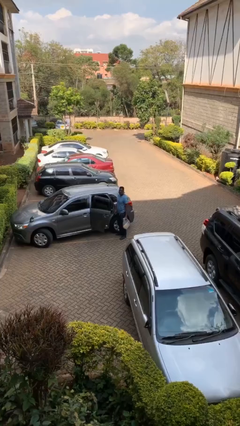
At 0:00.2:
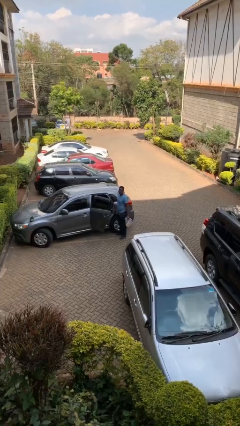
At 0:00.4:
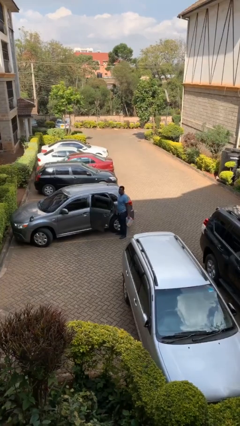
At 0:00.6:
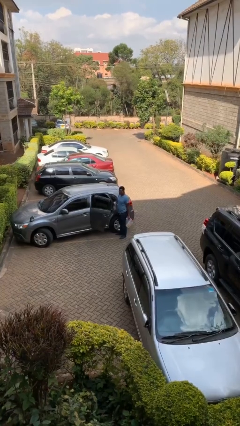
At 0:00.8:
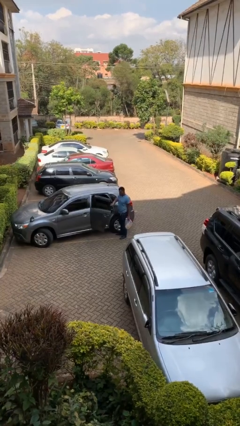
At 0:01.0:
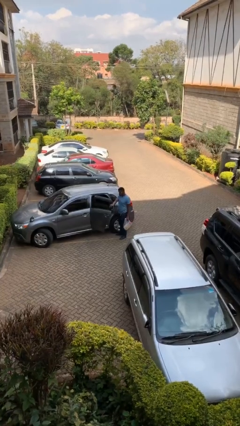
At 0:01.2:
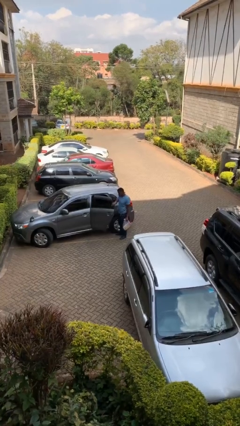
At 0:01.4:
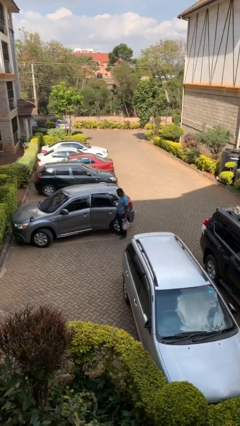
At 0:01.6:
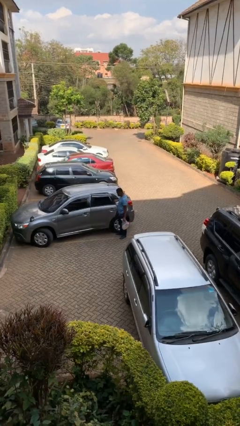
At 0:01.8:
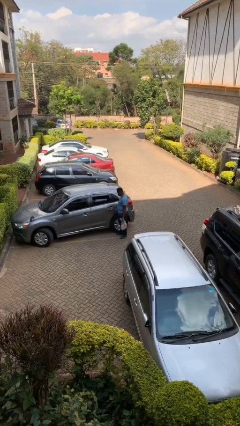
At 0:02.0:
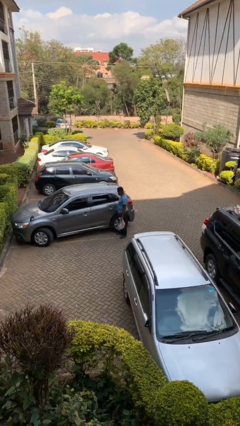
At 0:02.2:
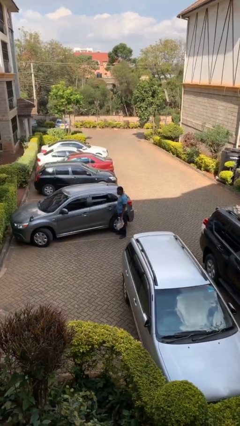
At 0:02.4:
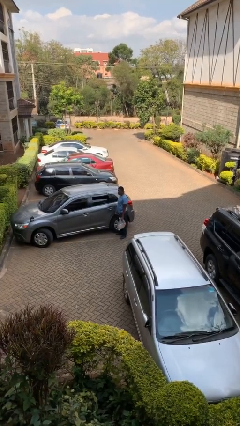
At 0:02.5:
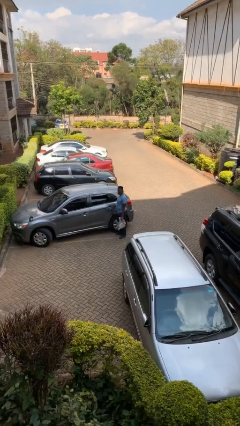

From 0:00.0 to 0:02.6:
person closes car door

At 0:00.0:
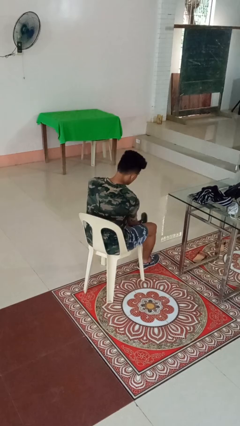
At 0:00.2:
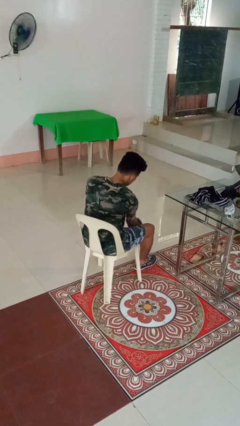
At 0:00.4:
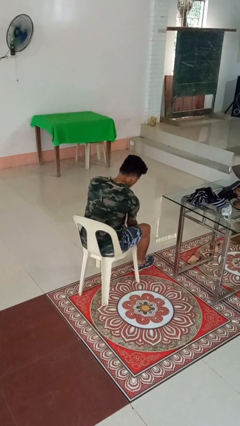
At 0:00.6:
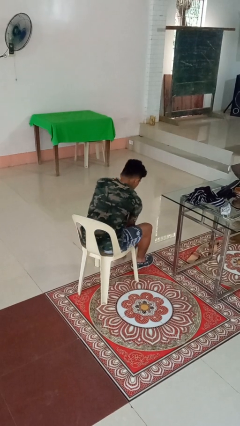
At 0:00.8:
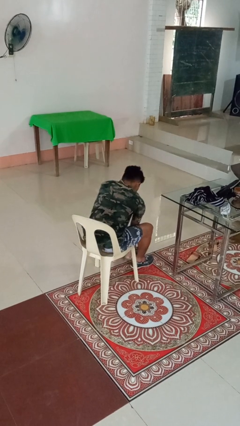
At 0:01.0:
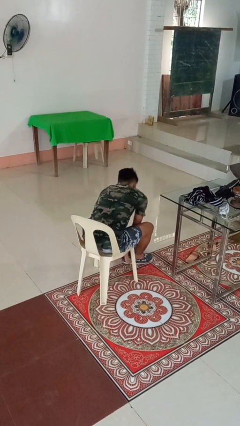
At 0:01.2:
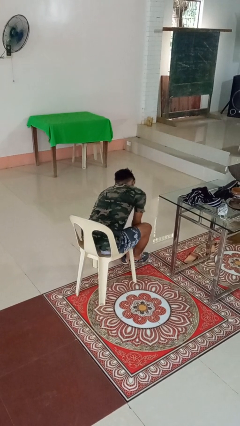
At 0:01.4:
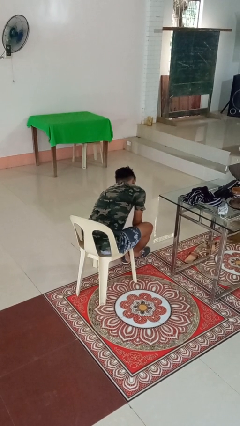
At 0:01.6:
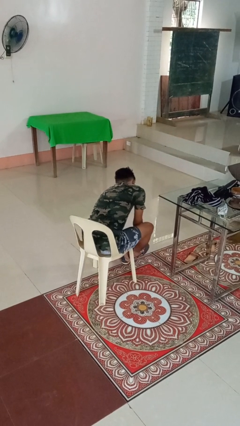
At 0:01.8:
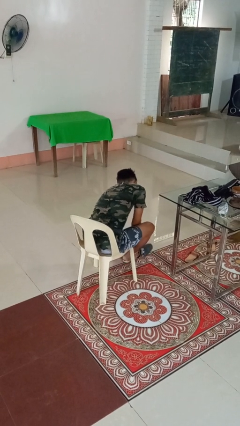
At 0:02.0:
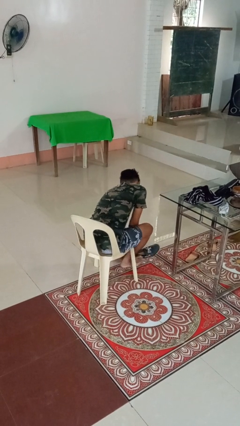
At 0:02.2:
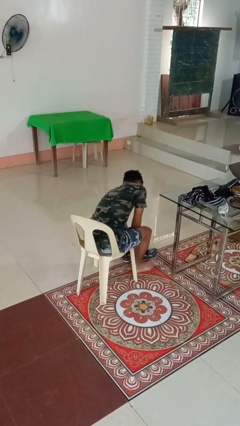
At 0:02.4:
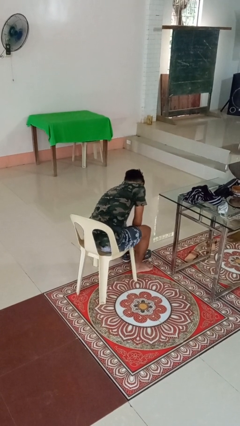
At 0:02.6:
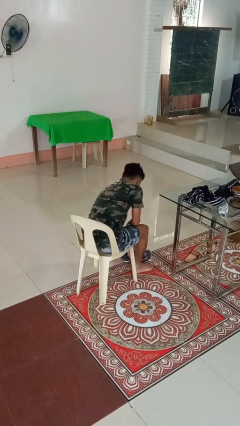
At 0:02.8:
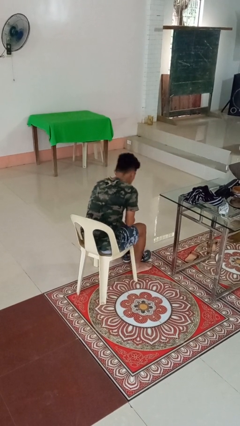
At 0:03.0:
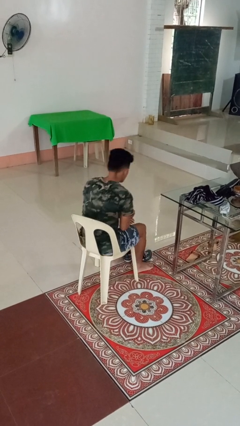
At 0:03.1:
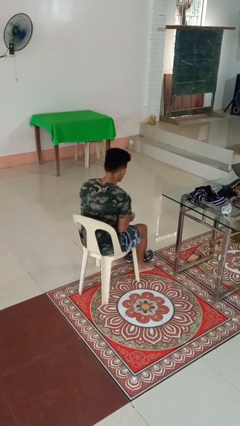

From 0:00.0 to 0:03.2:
person takes off shoes

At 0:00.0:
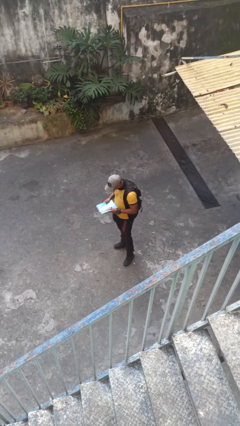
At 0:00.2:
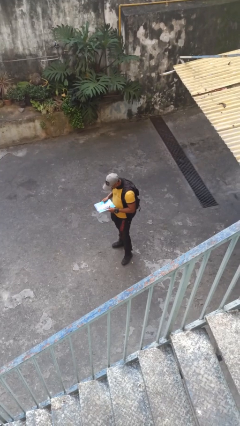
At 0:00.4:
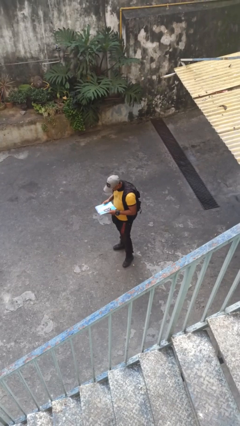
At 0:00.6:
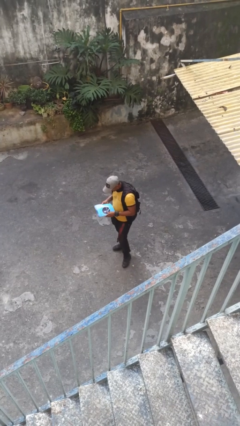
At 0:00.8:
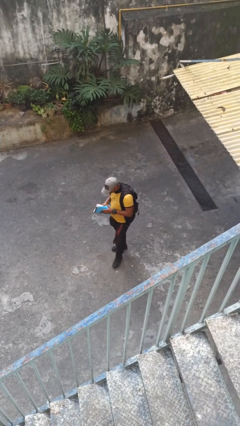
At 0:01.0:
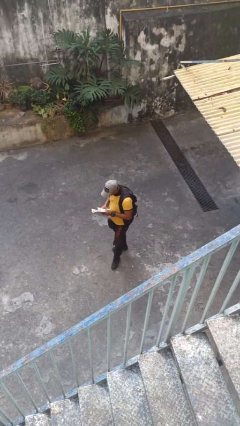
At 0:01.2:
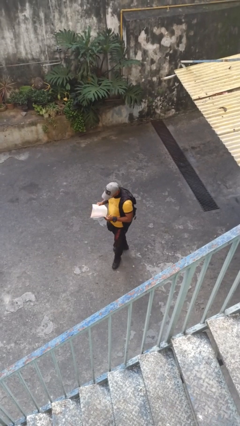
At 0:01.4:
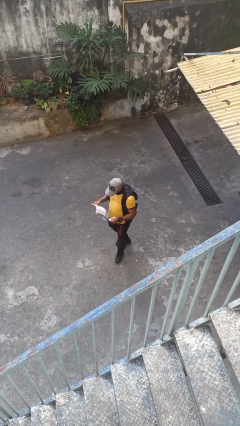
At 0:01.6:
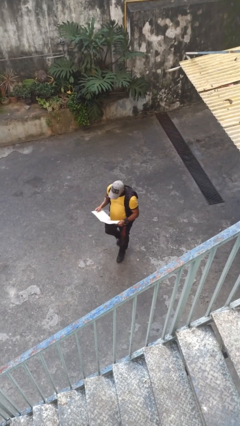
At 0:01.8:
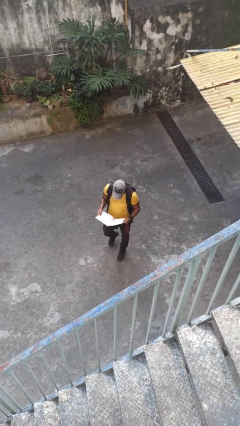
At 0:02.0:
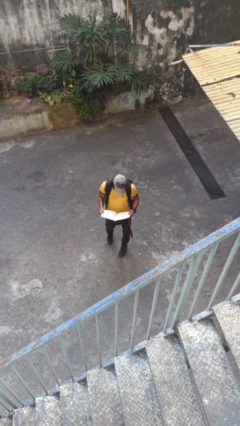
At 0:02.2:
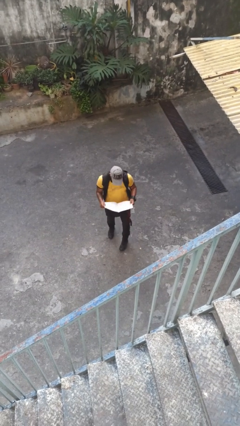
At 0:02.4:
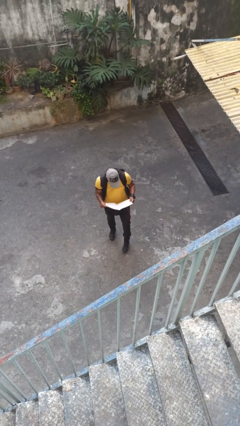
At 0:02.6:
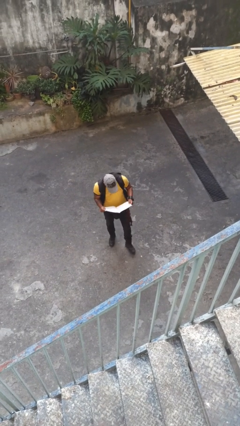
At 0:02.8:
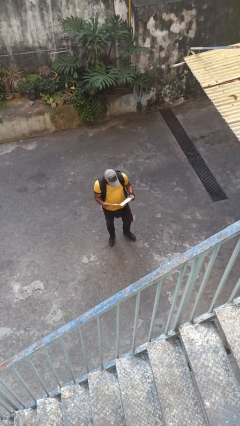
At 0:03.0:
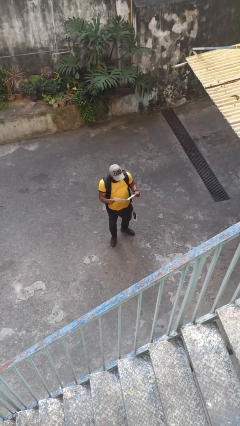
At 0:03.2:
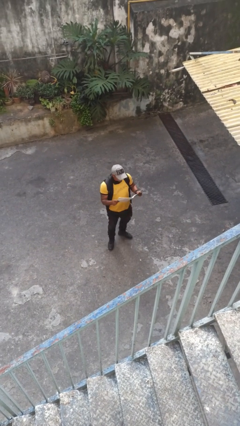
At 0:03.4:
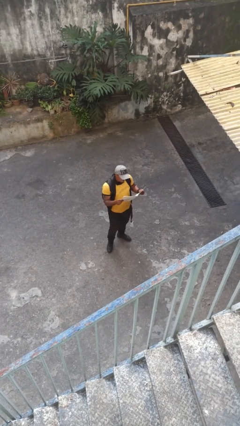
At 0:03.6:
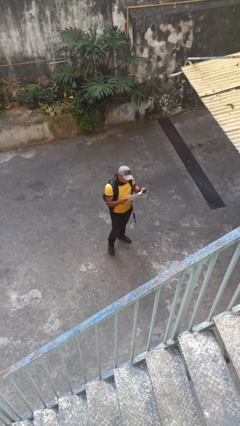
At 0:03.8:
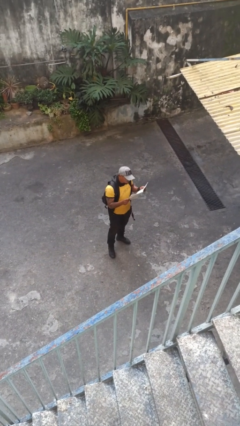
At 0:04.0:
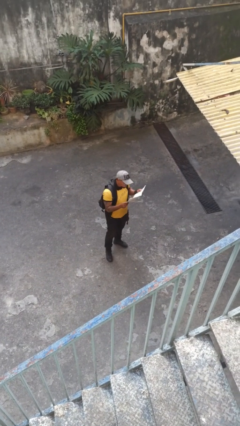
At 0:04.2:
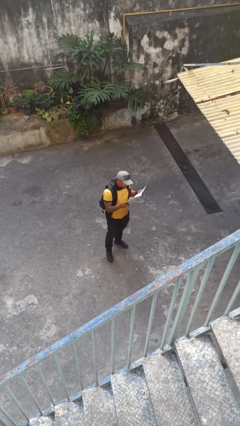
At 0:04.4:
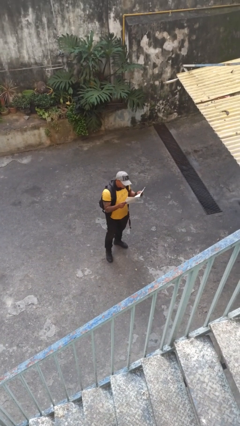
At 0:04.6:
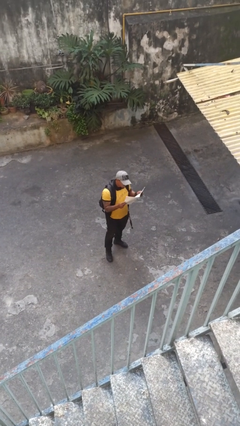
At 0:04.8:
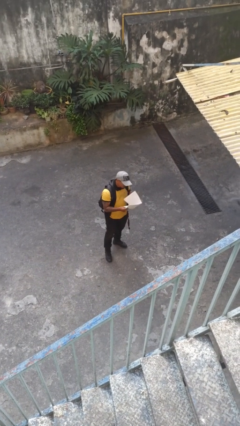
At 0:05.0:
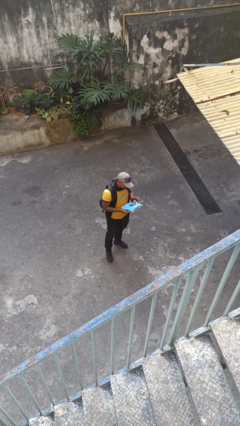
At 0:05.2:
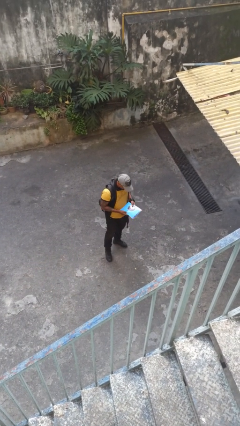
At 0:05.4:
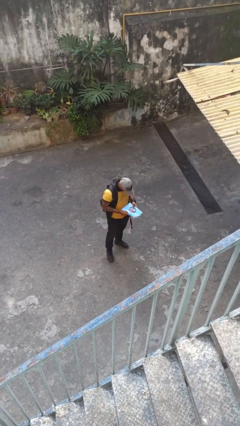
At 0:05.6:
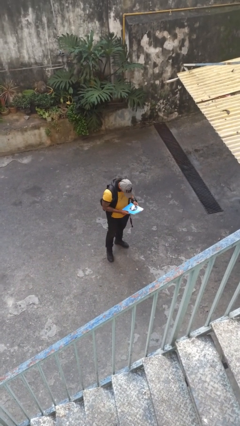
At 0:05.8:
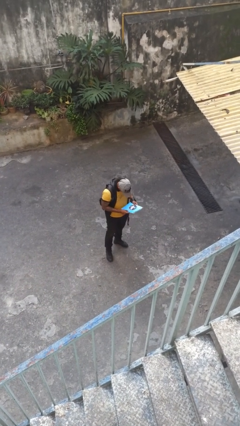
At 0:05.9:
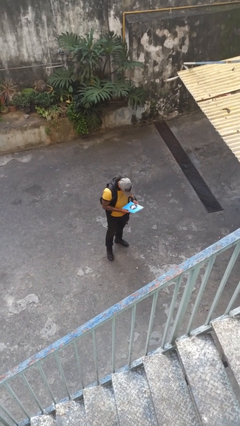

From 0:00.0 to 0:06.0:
person reads document

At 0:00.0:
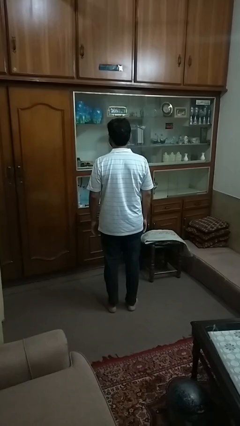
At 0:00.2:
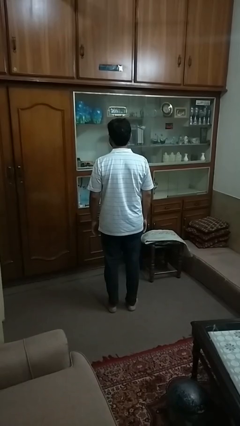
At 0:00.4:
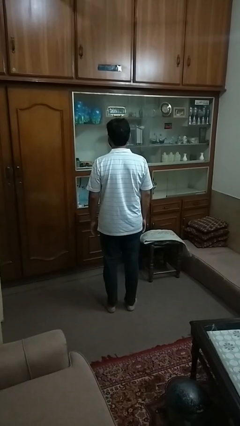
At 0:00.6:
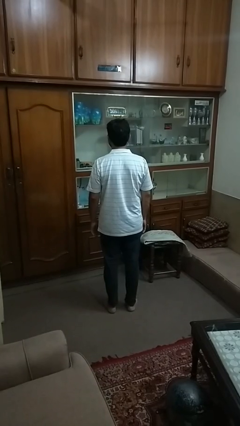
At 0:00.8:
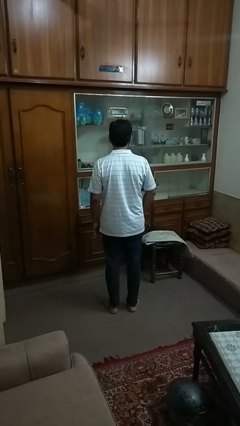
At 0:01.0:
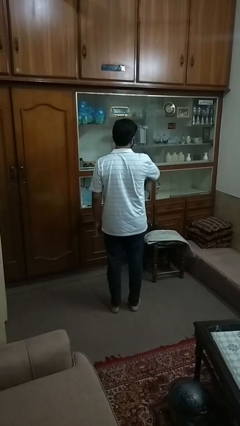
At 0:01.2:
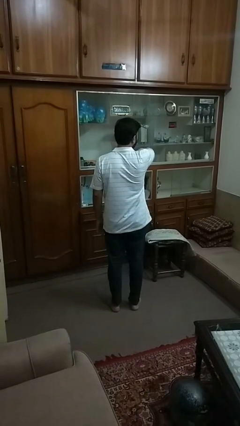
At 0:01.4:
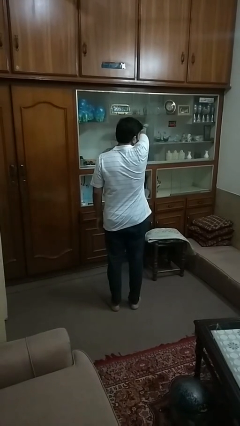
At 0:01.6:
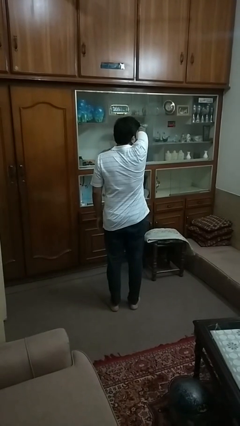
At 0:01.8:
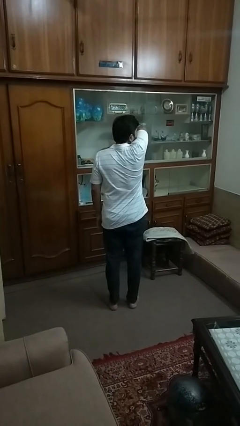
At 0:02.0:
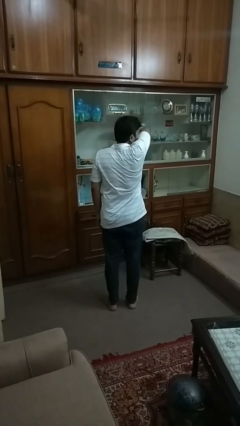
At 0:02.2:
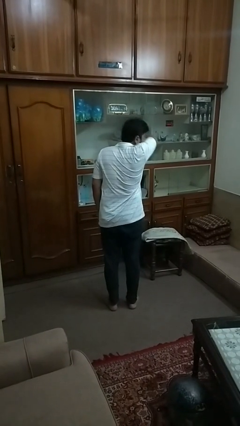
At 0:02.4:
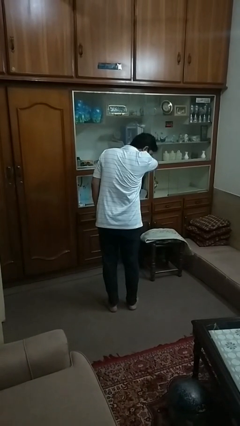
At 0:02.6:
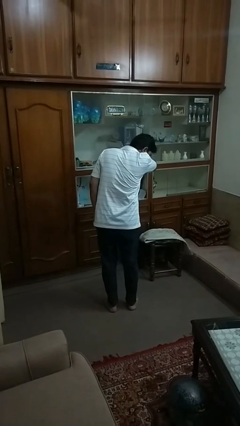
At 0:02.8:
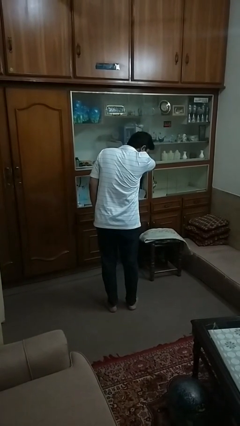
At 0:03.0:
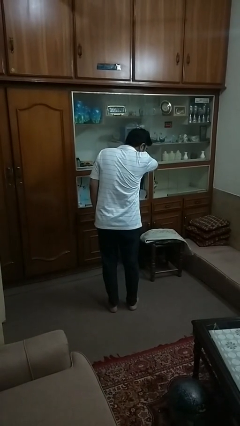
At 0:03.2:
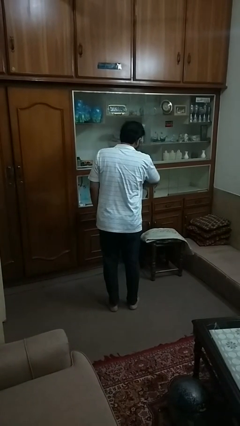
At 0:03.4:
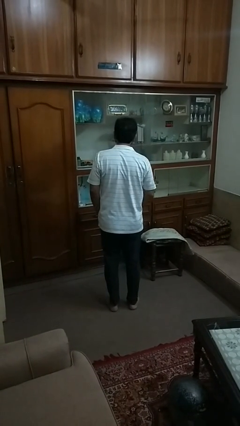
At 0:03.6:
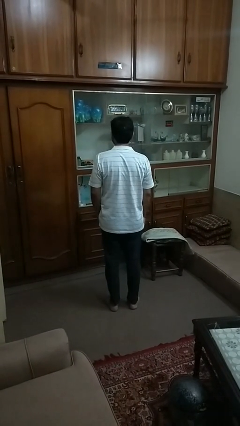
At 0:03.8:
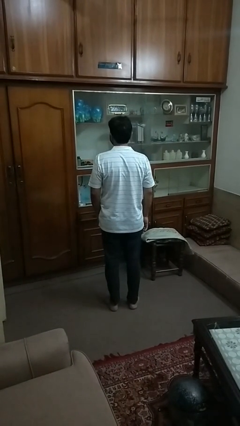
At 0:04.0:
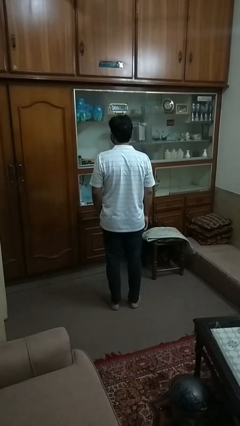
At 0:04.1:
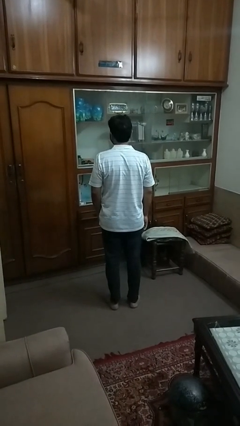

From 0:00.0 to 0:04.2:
person sneezes into arm

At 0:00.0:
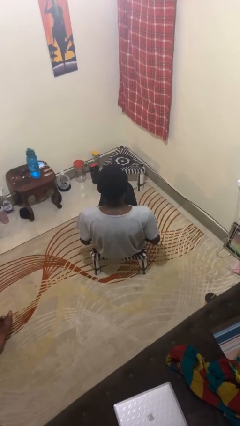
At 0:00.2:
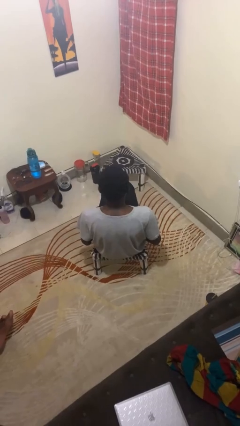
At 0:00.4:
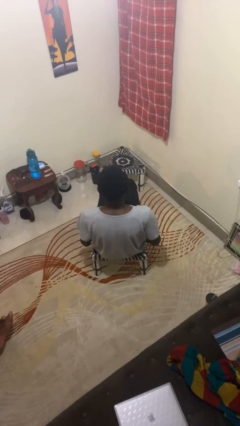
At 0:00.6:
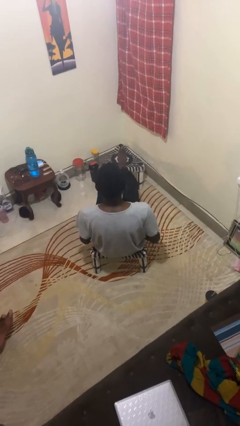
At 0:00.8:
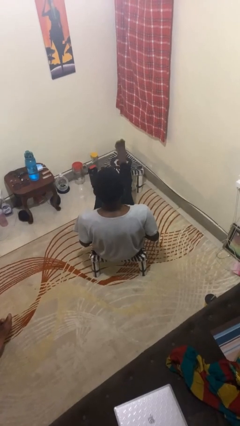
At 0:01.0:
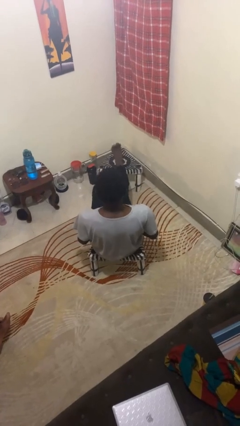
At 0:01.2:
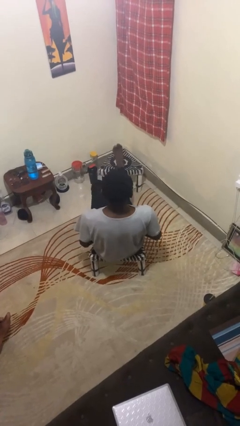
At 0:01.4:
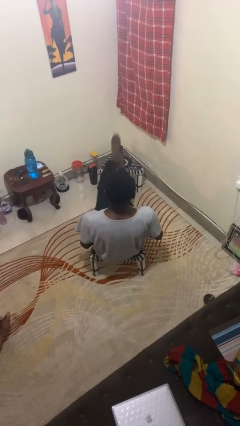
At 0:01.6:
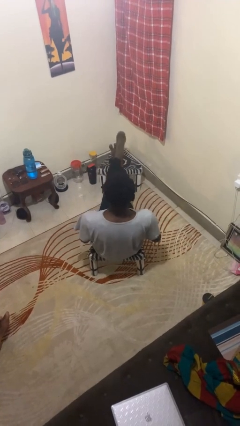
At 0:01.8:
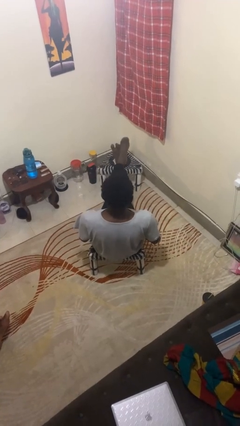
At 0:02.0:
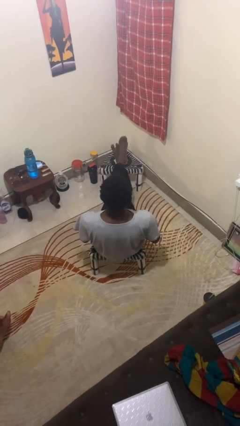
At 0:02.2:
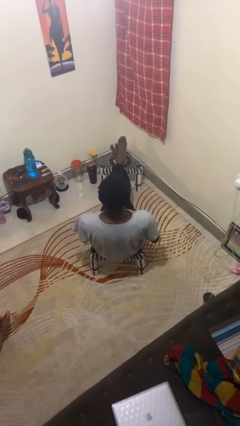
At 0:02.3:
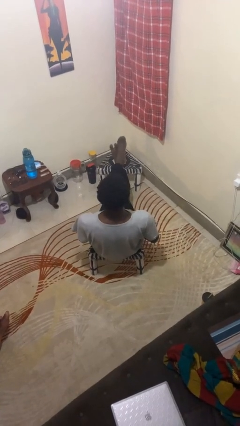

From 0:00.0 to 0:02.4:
person puts feet up
